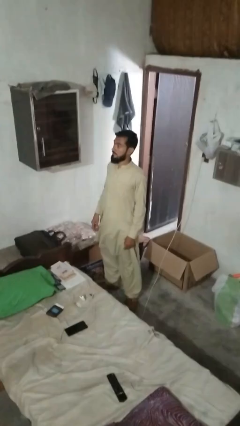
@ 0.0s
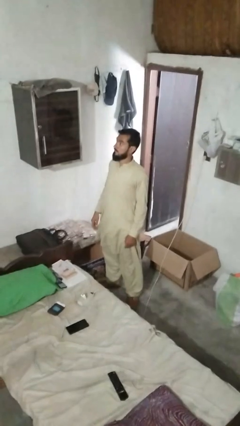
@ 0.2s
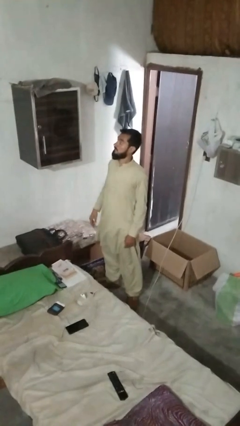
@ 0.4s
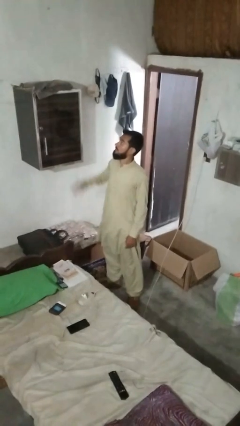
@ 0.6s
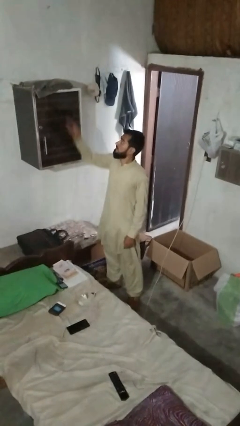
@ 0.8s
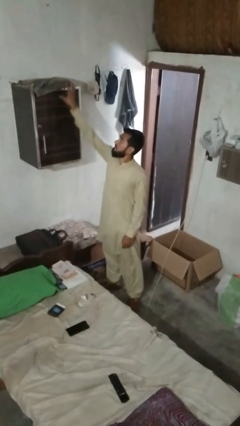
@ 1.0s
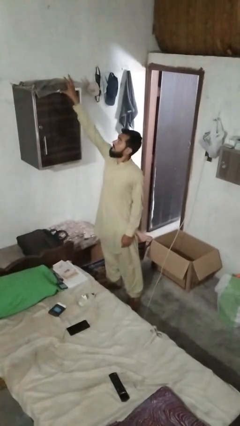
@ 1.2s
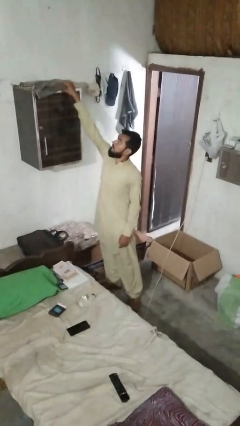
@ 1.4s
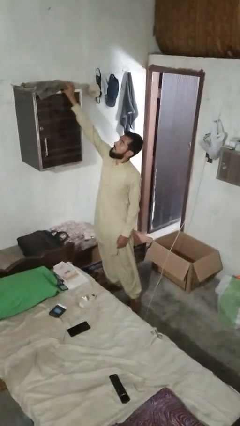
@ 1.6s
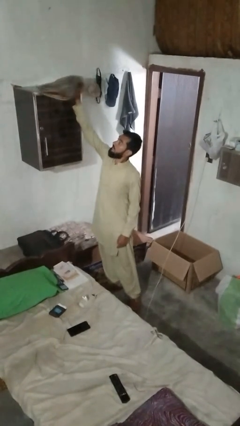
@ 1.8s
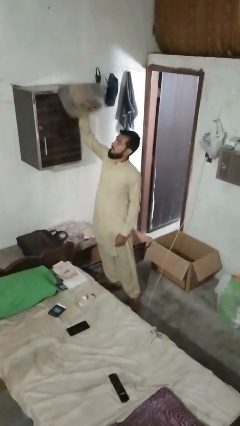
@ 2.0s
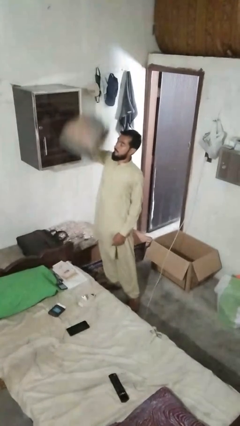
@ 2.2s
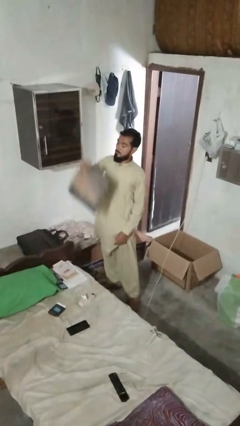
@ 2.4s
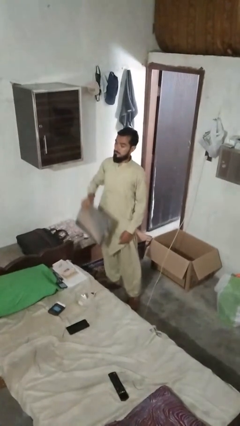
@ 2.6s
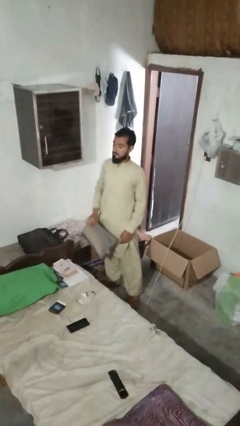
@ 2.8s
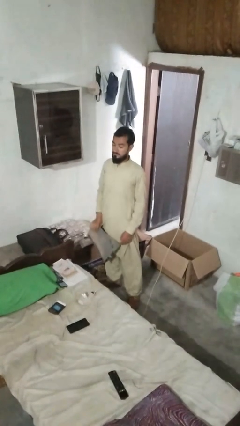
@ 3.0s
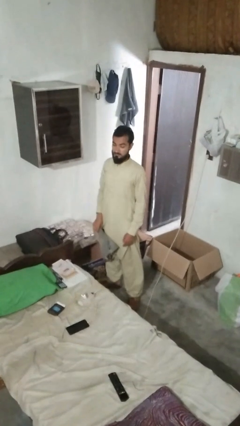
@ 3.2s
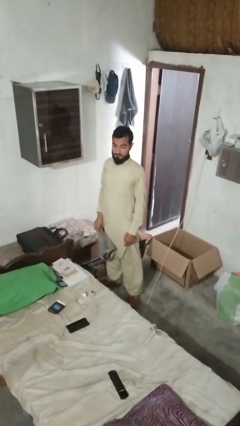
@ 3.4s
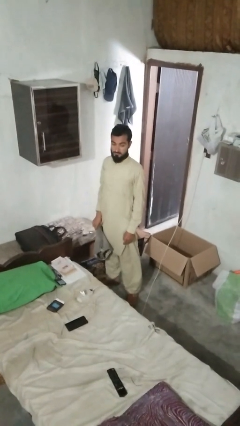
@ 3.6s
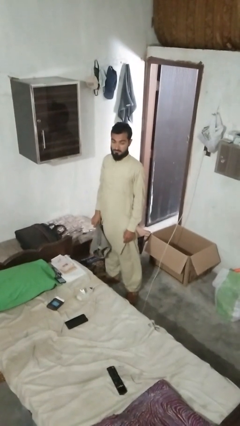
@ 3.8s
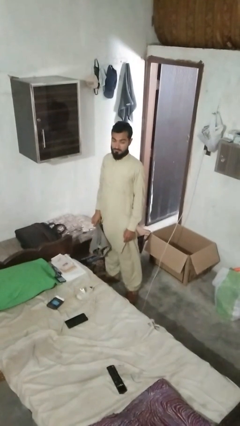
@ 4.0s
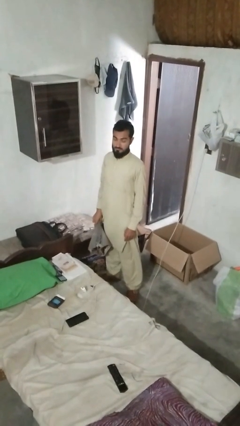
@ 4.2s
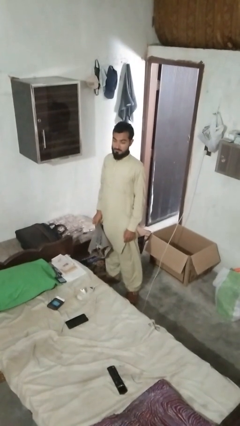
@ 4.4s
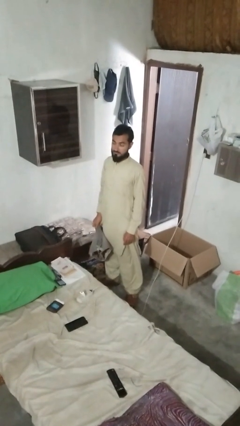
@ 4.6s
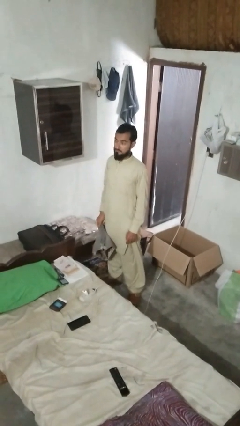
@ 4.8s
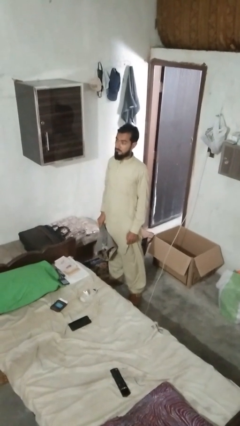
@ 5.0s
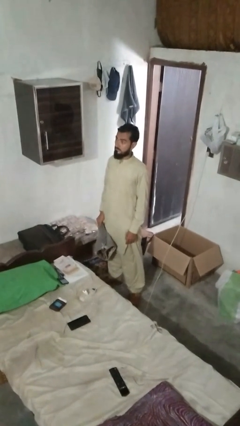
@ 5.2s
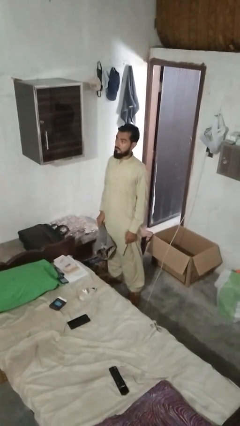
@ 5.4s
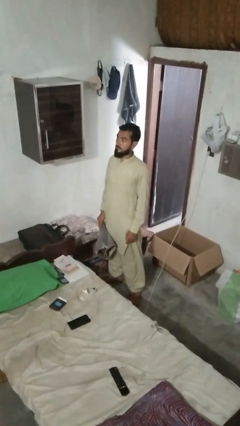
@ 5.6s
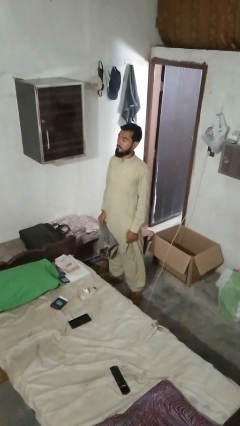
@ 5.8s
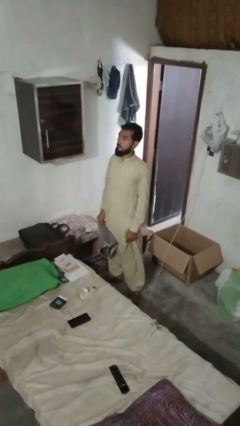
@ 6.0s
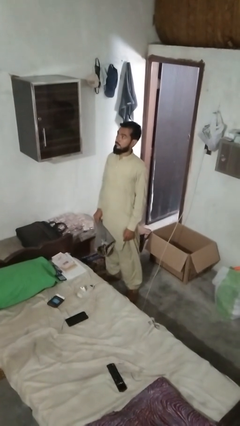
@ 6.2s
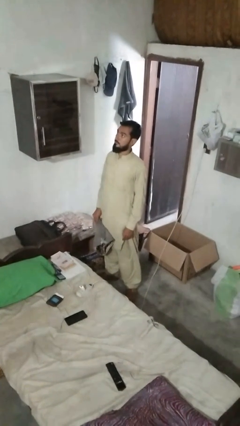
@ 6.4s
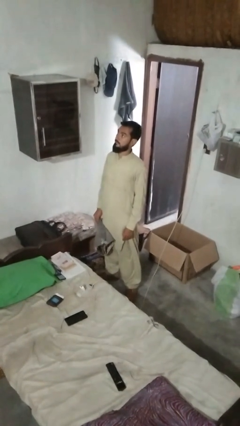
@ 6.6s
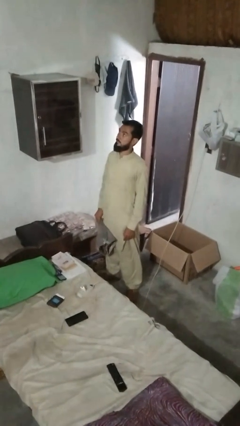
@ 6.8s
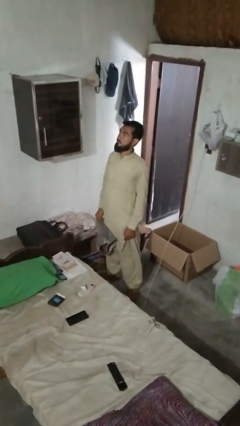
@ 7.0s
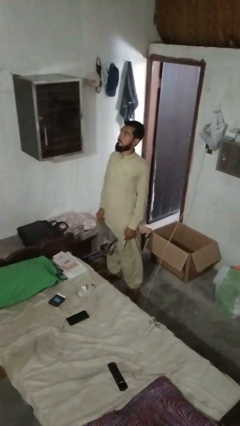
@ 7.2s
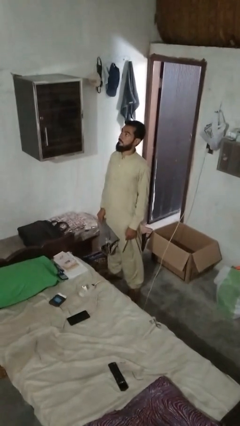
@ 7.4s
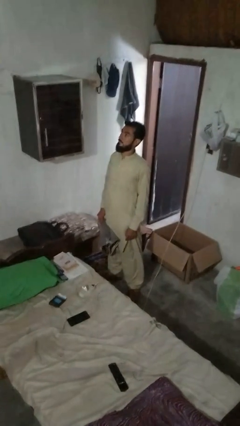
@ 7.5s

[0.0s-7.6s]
person puts down object on shelf

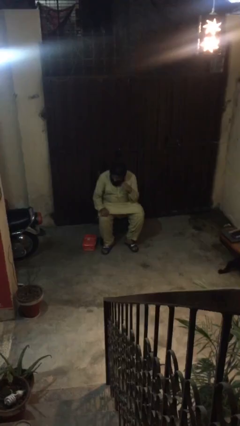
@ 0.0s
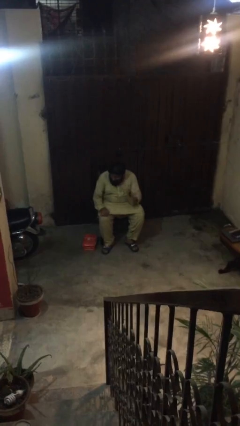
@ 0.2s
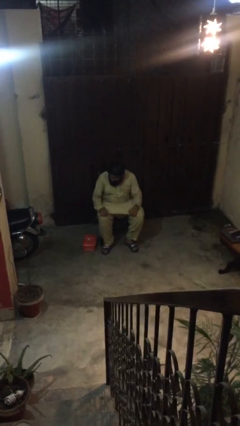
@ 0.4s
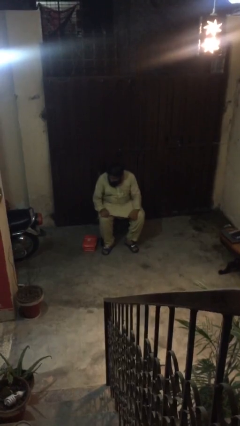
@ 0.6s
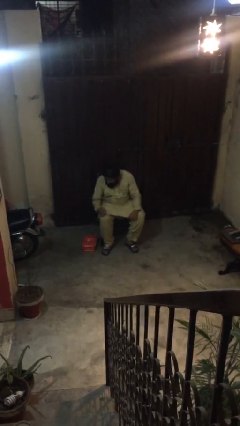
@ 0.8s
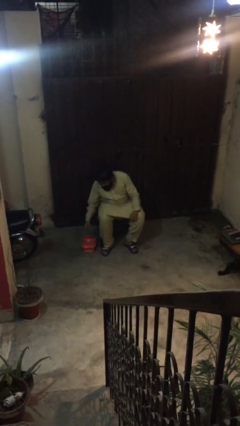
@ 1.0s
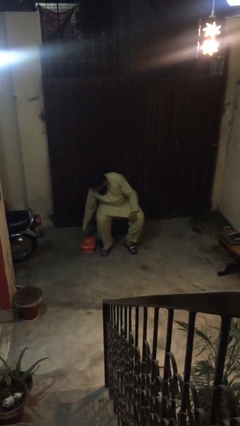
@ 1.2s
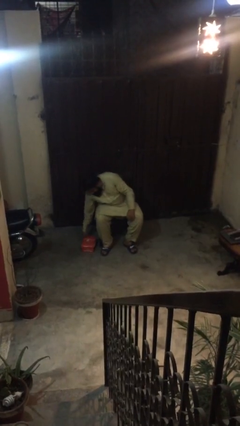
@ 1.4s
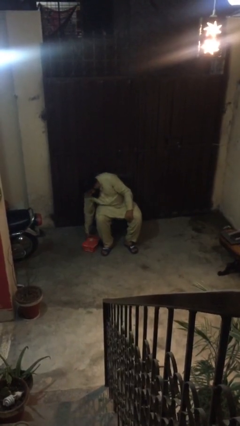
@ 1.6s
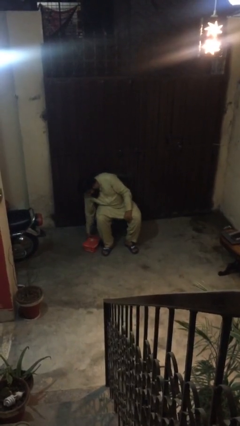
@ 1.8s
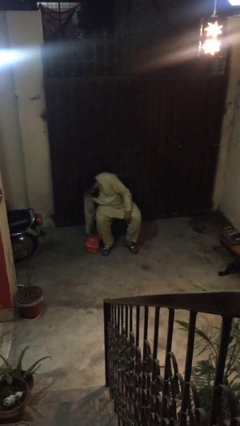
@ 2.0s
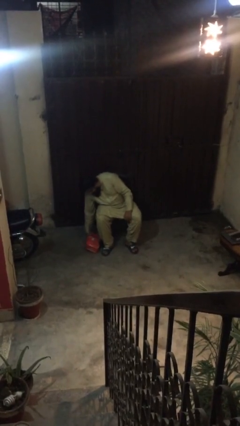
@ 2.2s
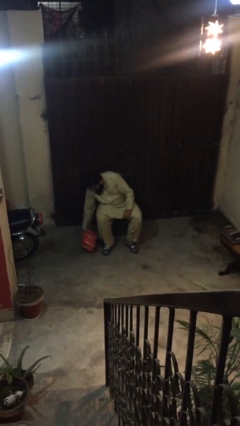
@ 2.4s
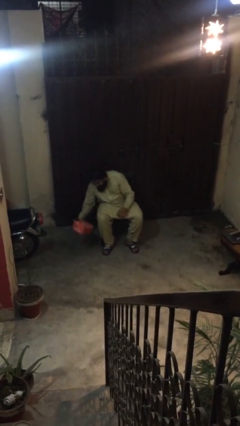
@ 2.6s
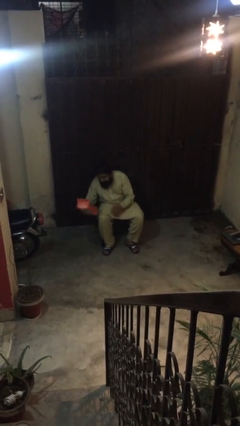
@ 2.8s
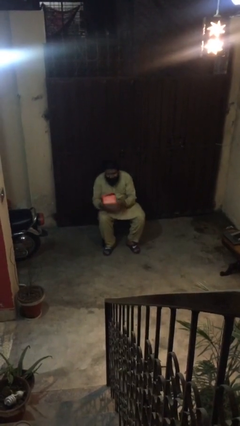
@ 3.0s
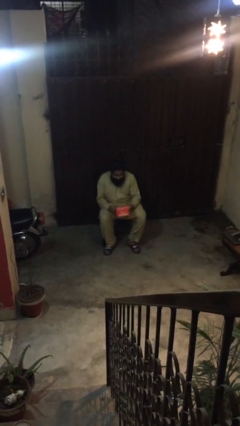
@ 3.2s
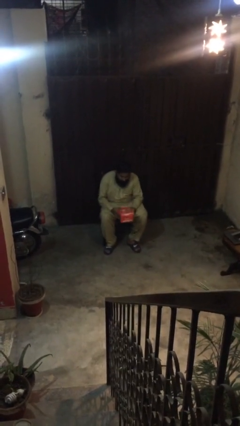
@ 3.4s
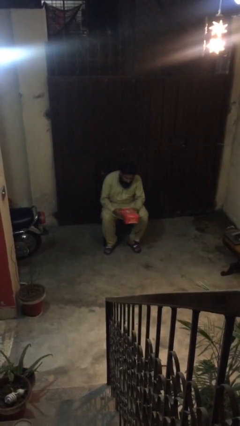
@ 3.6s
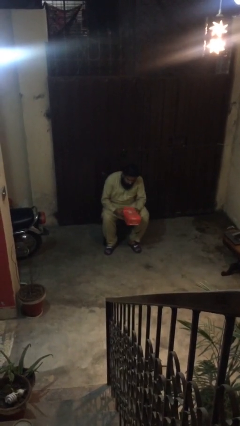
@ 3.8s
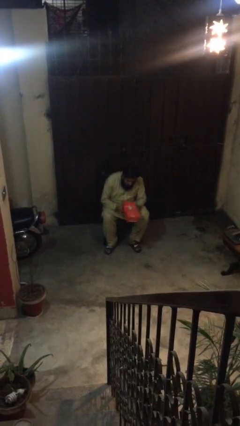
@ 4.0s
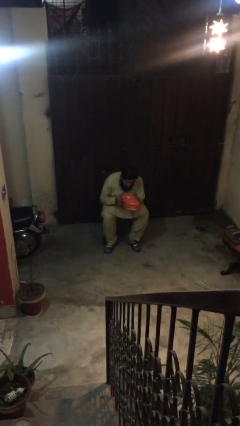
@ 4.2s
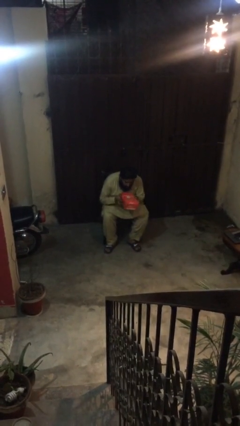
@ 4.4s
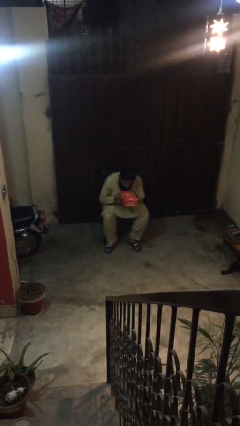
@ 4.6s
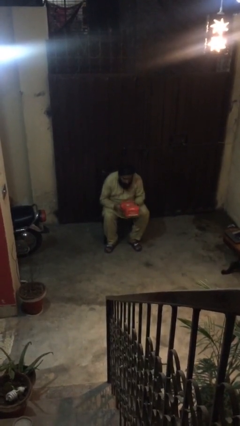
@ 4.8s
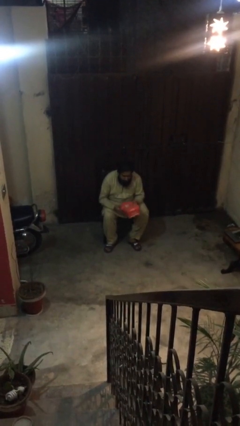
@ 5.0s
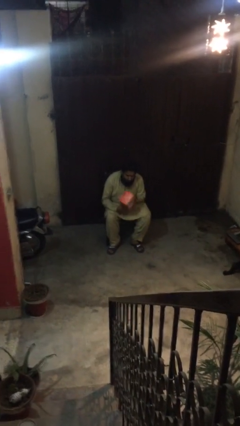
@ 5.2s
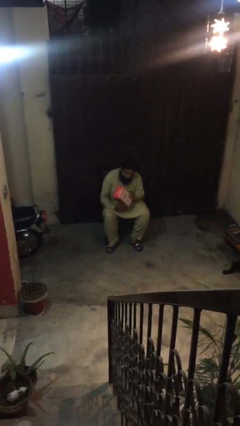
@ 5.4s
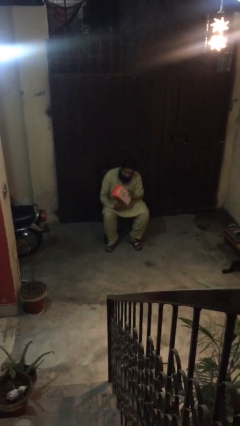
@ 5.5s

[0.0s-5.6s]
person picks up object from floor

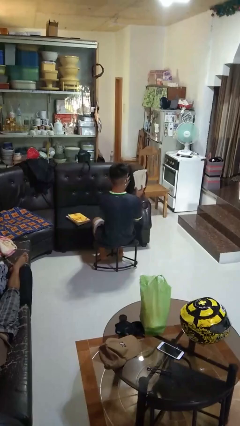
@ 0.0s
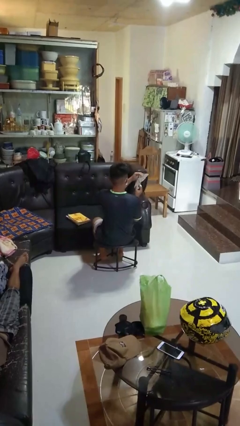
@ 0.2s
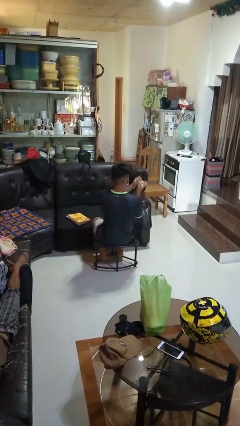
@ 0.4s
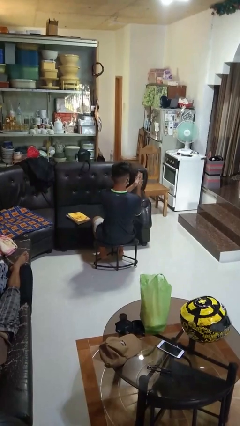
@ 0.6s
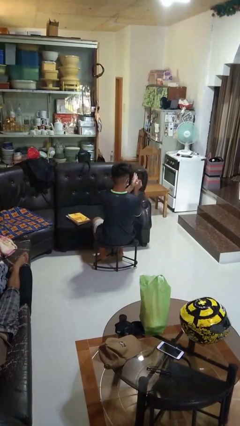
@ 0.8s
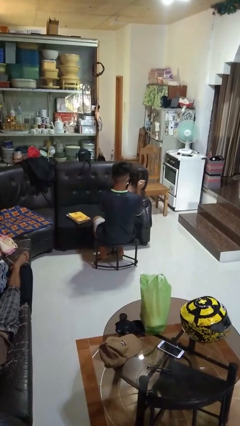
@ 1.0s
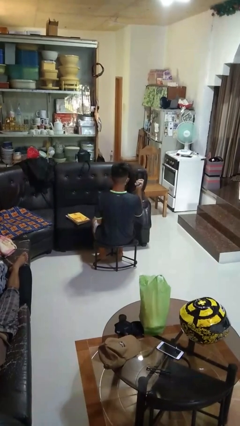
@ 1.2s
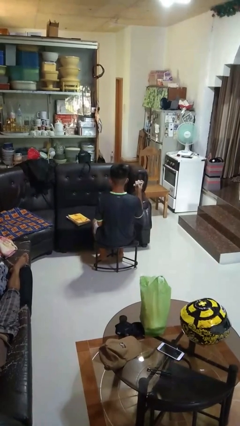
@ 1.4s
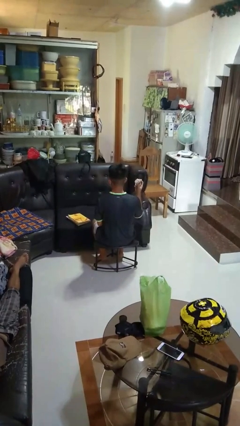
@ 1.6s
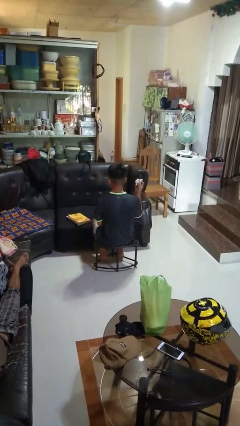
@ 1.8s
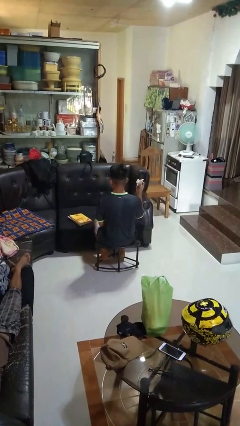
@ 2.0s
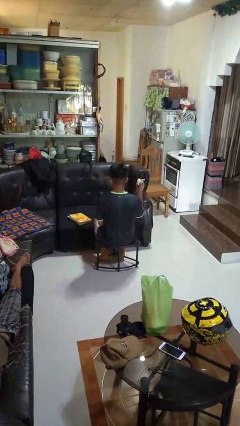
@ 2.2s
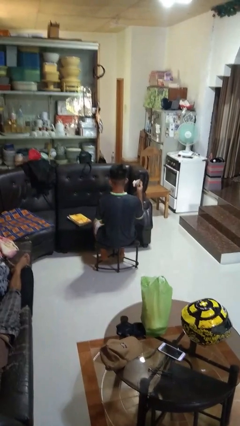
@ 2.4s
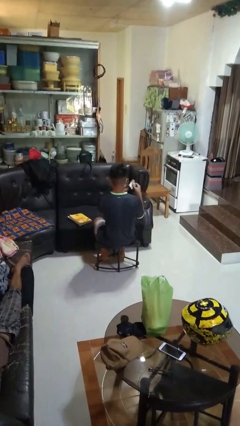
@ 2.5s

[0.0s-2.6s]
person crumples paper

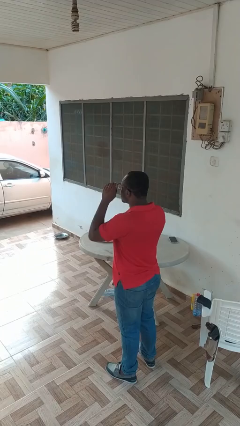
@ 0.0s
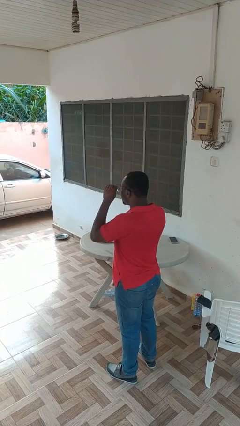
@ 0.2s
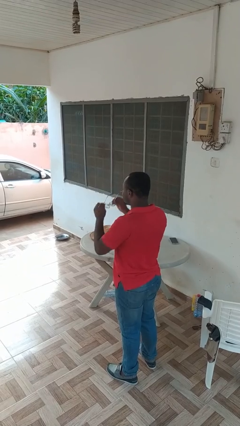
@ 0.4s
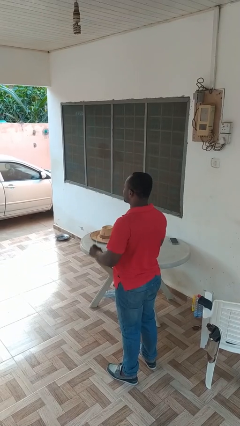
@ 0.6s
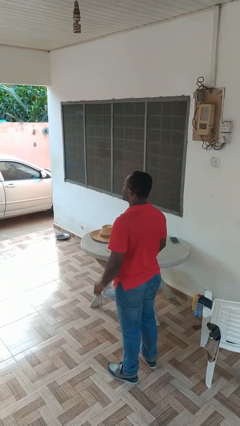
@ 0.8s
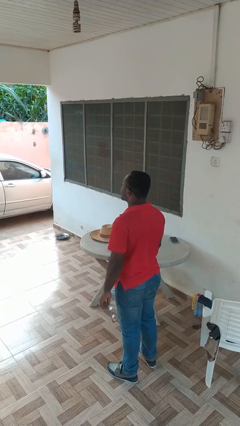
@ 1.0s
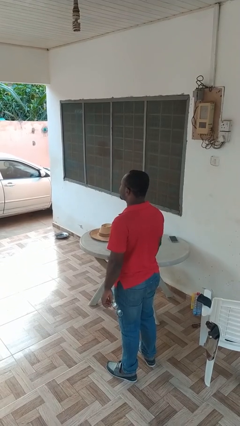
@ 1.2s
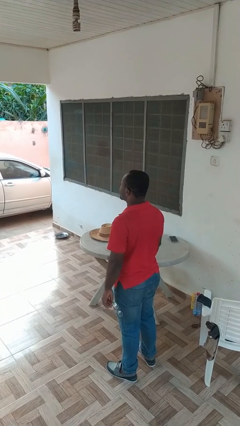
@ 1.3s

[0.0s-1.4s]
person takes off glasses

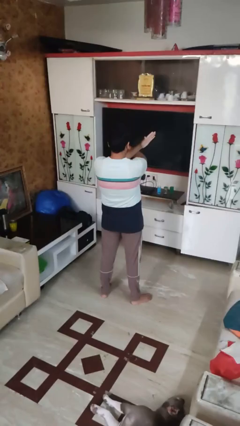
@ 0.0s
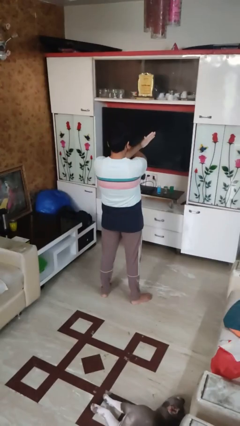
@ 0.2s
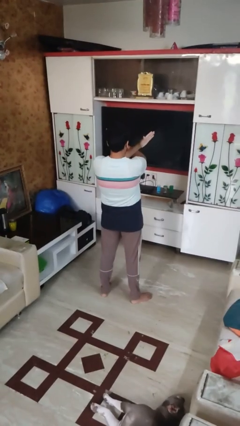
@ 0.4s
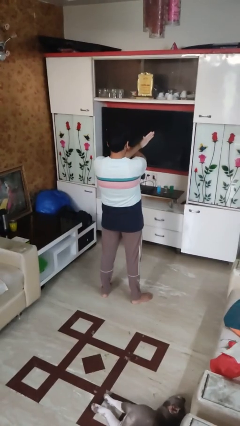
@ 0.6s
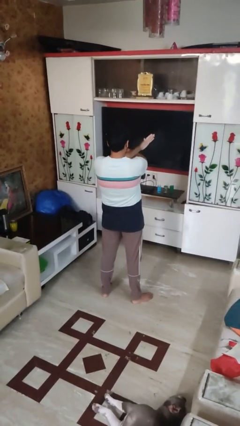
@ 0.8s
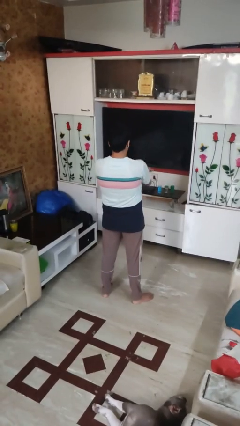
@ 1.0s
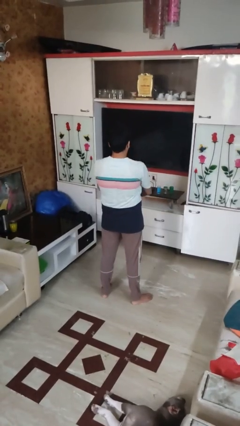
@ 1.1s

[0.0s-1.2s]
person gestures arms x
